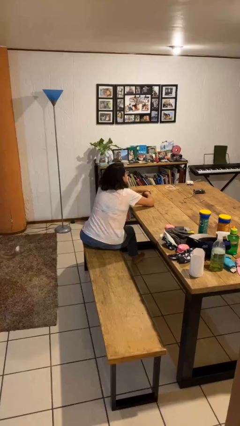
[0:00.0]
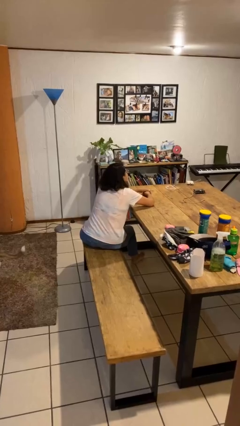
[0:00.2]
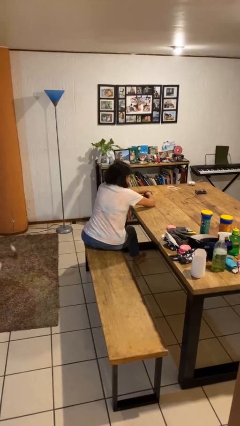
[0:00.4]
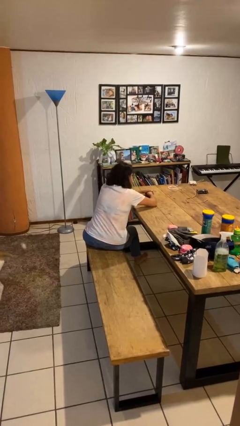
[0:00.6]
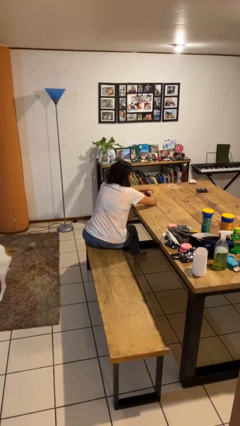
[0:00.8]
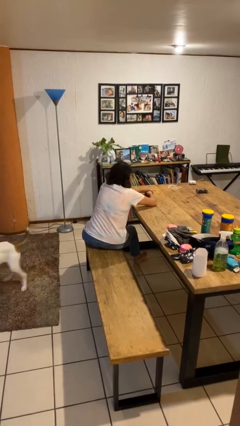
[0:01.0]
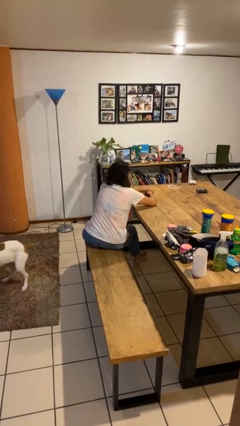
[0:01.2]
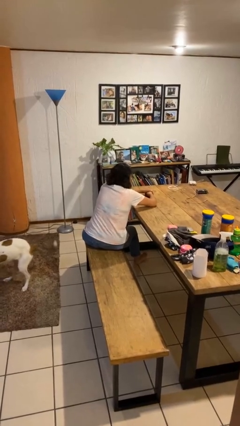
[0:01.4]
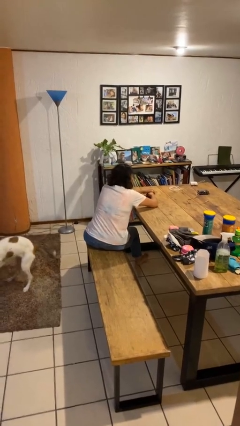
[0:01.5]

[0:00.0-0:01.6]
person nods head

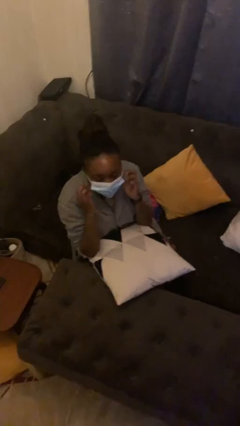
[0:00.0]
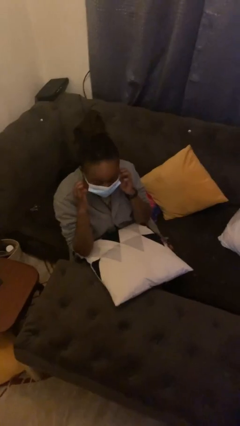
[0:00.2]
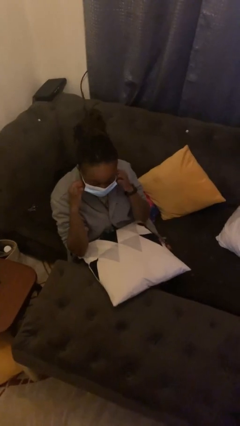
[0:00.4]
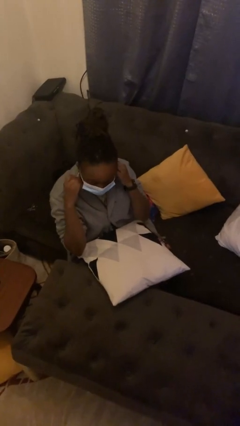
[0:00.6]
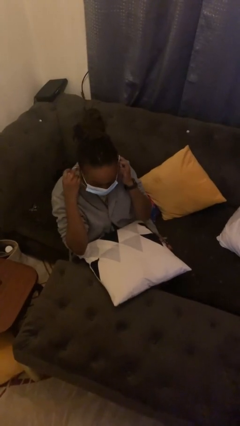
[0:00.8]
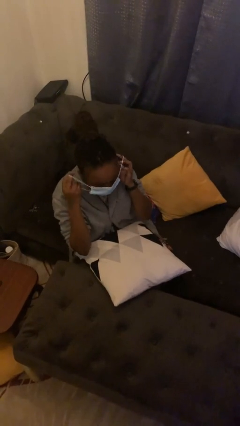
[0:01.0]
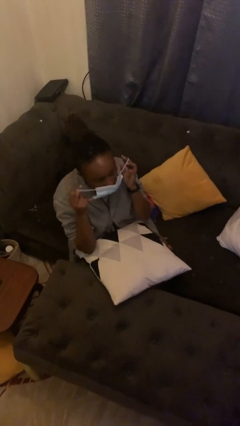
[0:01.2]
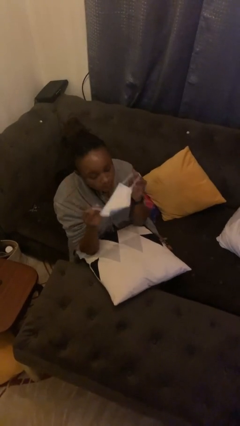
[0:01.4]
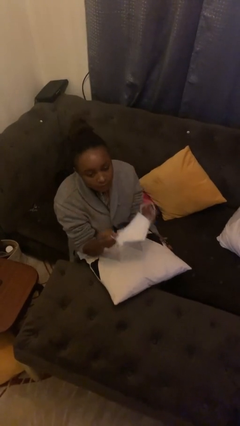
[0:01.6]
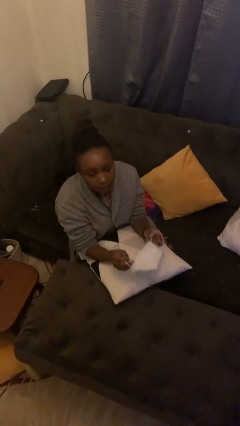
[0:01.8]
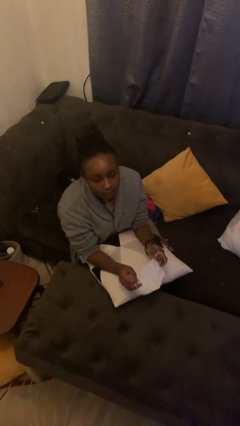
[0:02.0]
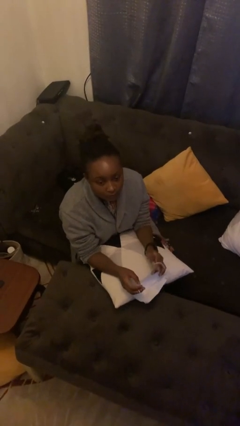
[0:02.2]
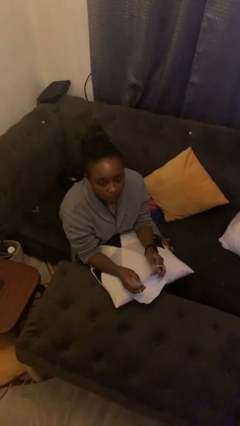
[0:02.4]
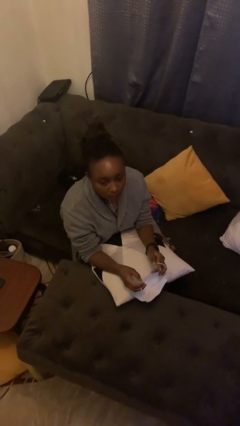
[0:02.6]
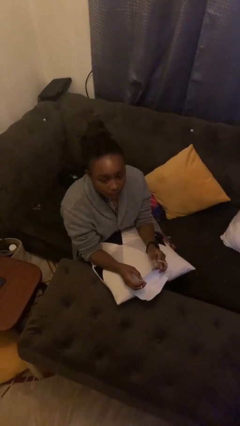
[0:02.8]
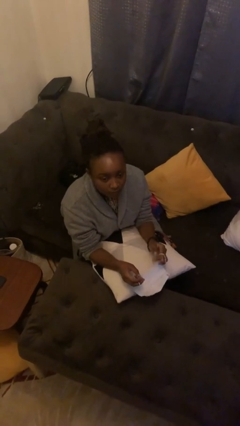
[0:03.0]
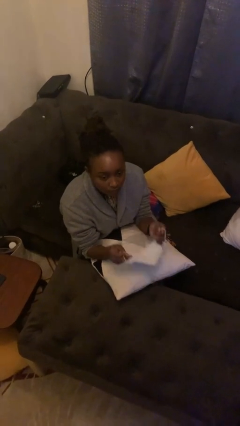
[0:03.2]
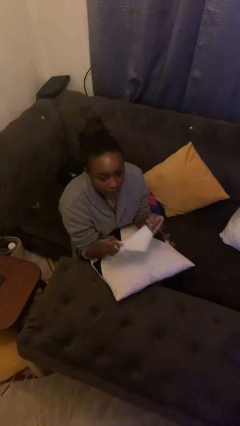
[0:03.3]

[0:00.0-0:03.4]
person takes off facemask

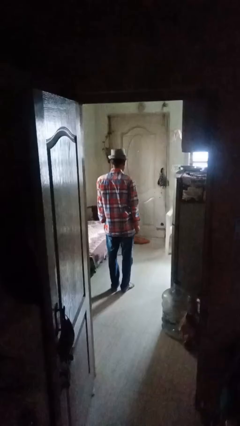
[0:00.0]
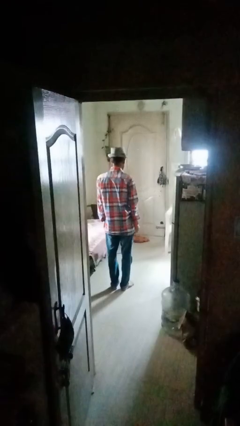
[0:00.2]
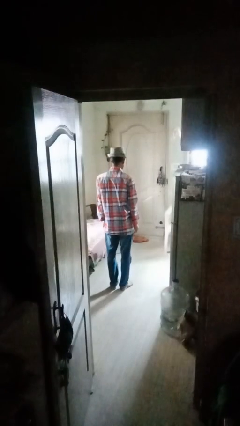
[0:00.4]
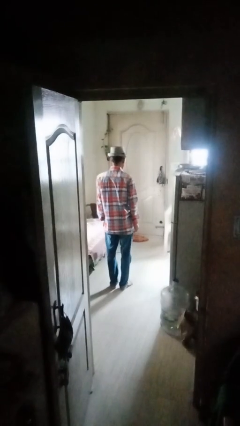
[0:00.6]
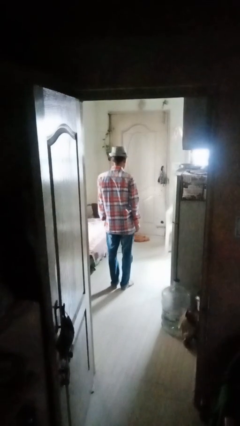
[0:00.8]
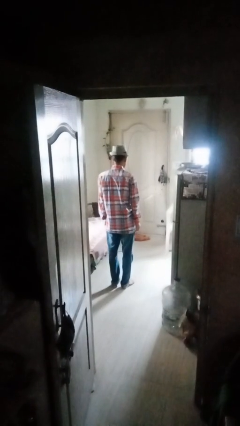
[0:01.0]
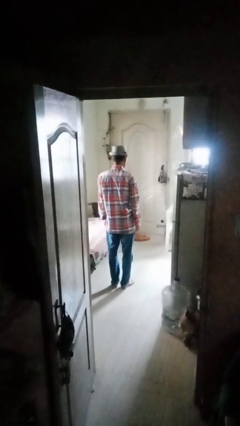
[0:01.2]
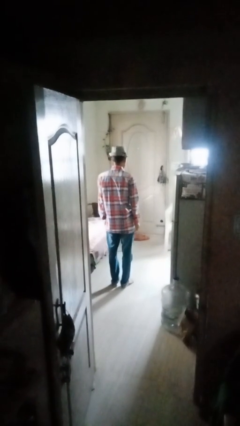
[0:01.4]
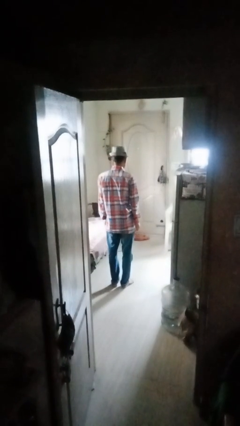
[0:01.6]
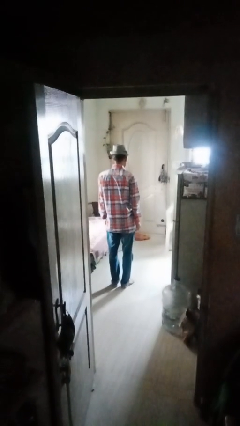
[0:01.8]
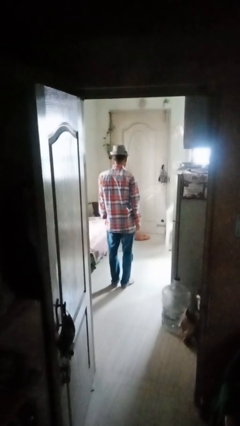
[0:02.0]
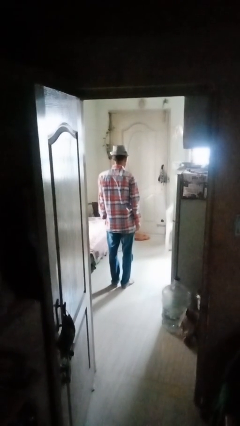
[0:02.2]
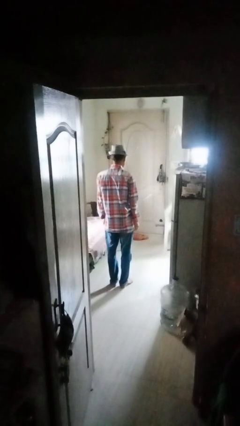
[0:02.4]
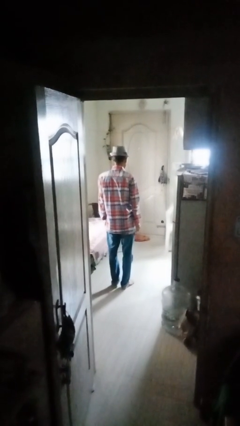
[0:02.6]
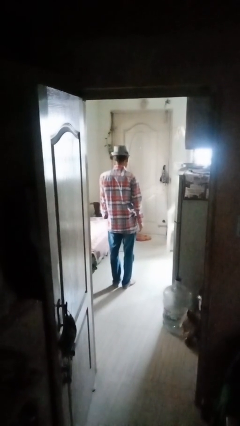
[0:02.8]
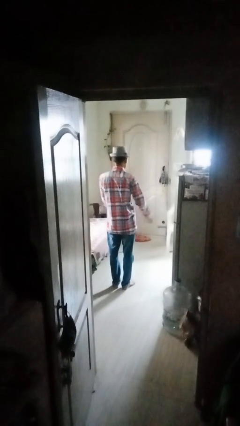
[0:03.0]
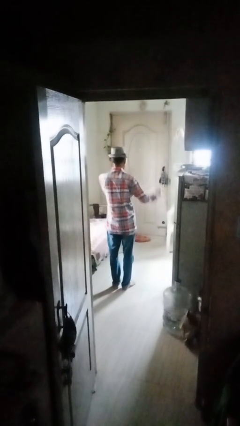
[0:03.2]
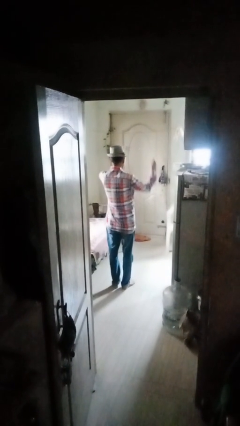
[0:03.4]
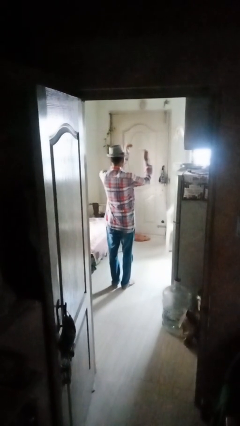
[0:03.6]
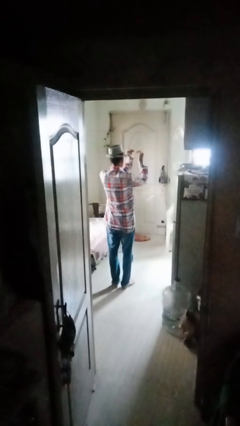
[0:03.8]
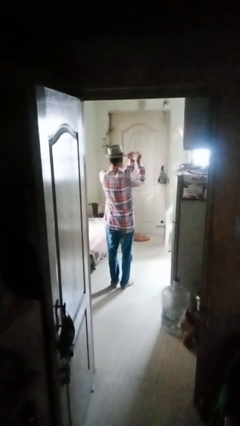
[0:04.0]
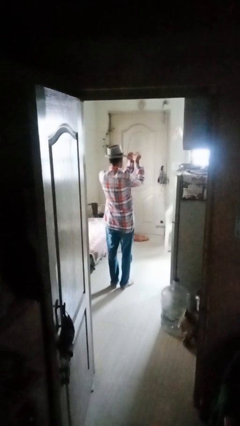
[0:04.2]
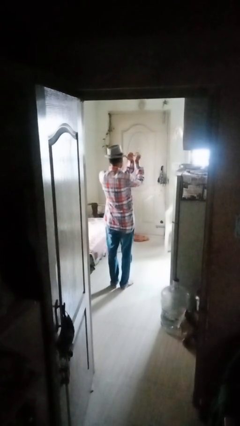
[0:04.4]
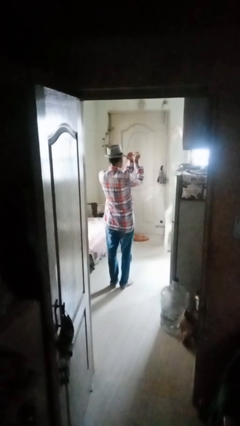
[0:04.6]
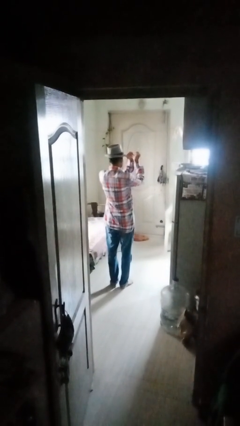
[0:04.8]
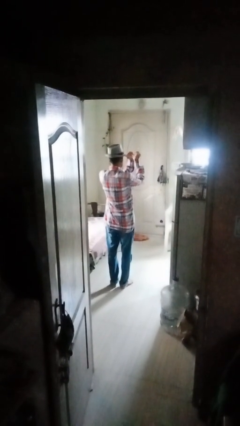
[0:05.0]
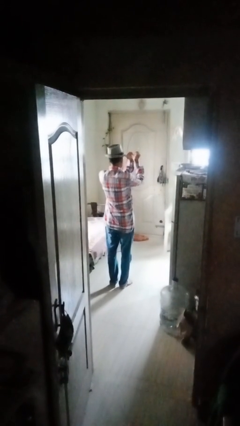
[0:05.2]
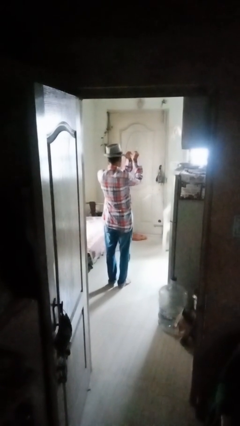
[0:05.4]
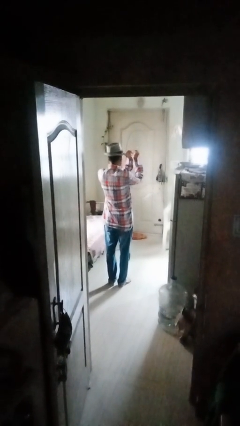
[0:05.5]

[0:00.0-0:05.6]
person gestures heart

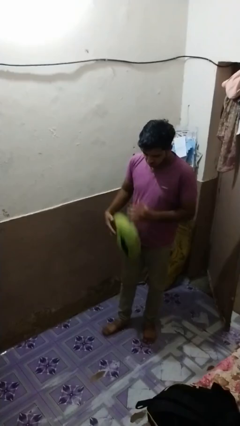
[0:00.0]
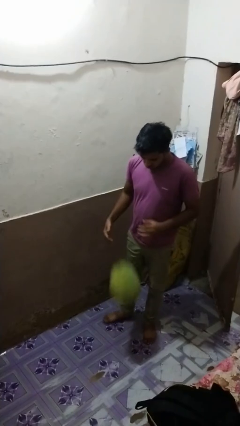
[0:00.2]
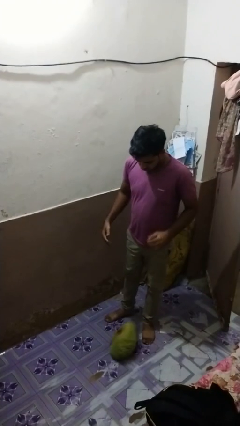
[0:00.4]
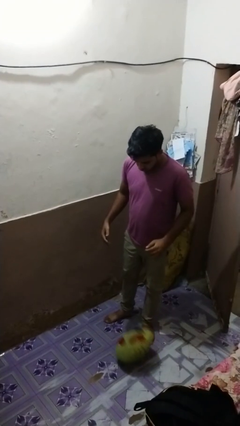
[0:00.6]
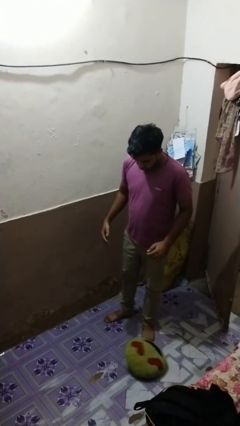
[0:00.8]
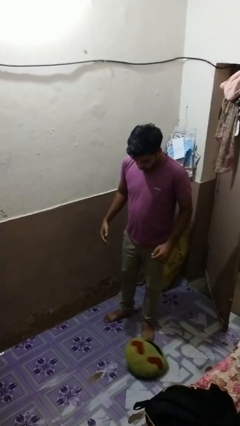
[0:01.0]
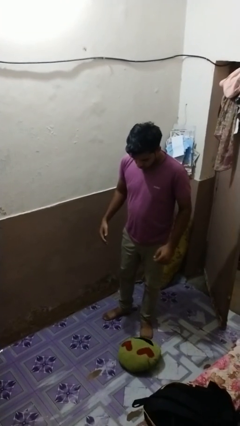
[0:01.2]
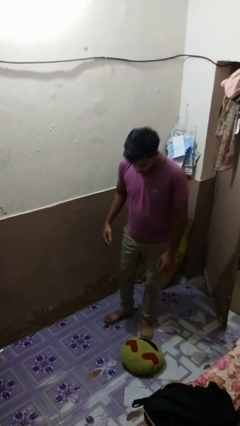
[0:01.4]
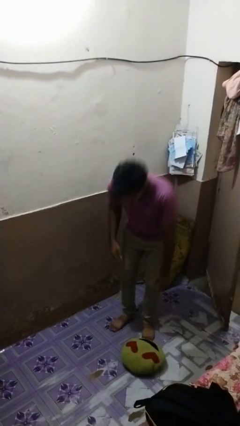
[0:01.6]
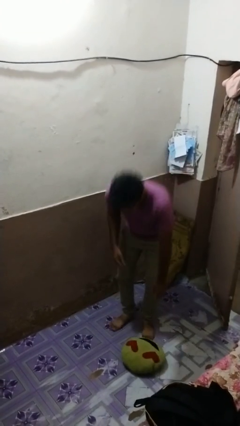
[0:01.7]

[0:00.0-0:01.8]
person drops object

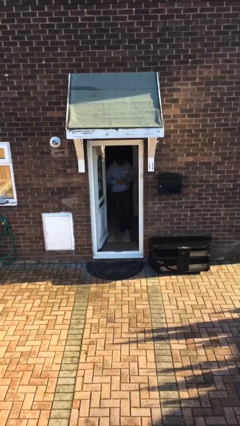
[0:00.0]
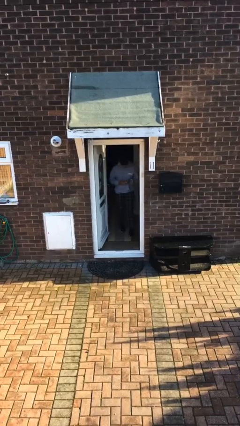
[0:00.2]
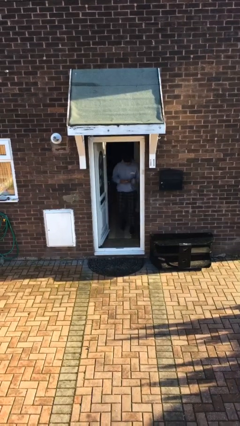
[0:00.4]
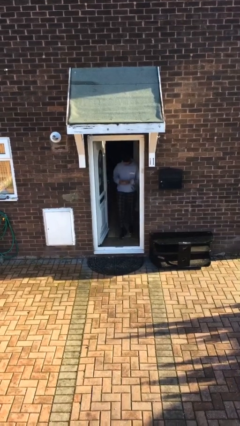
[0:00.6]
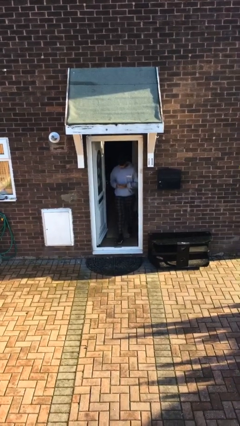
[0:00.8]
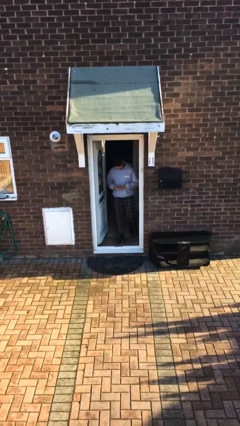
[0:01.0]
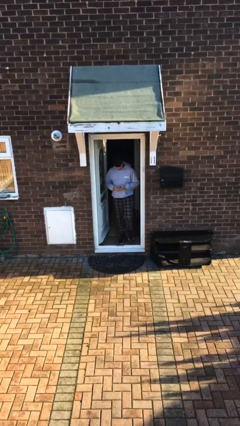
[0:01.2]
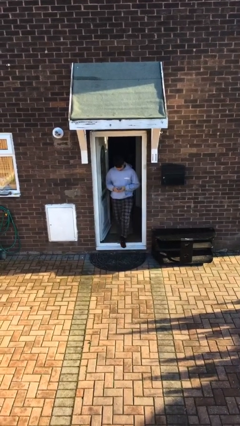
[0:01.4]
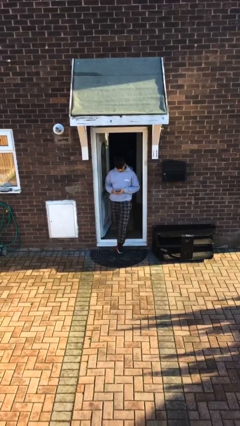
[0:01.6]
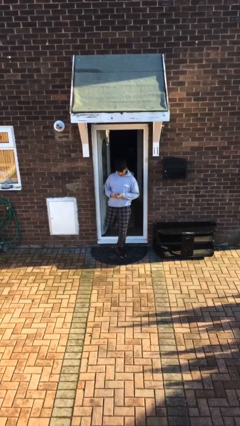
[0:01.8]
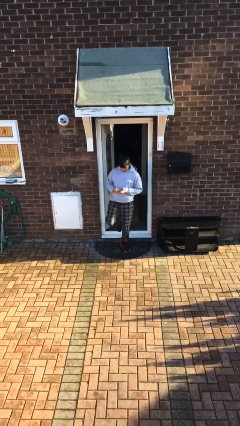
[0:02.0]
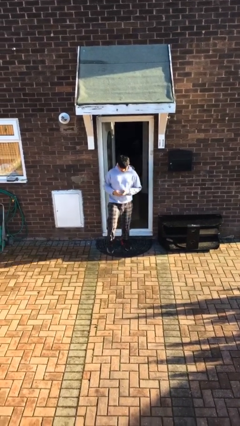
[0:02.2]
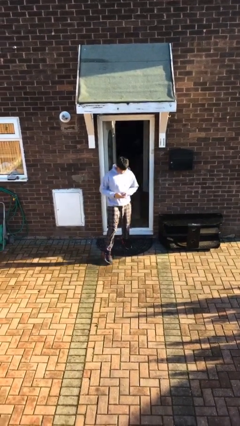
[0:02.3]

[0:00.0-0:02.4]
person enters scene through structure

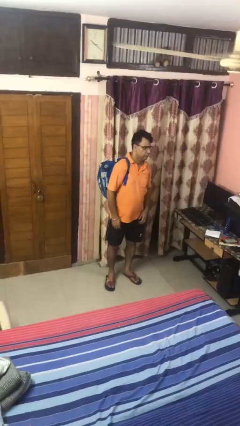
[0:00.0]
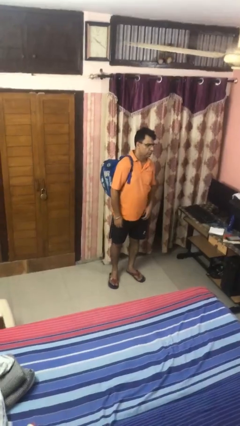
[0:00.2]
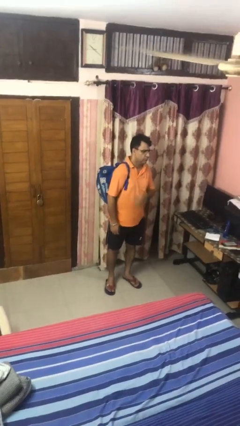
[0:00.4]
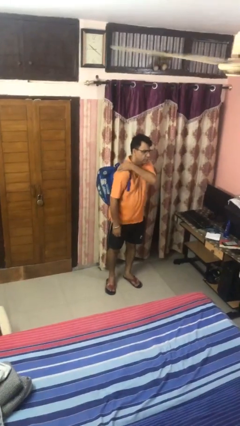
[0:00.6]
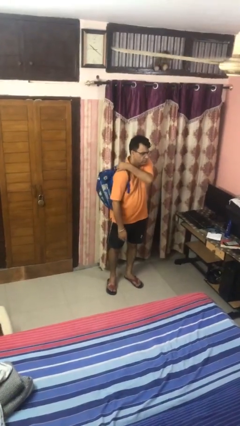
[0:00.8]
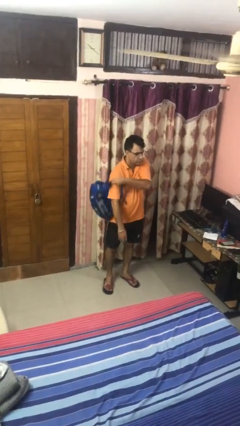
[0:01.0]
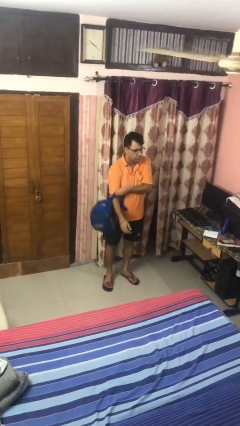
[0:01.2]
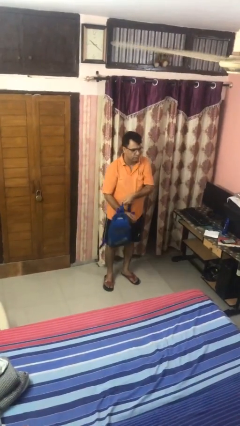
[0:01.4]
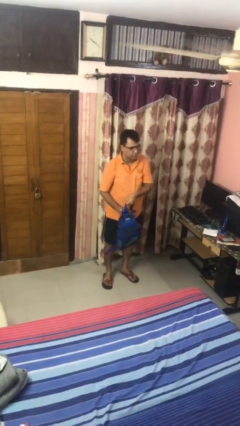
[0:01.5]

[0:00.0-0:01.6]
person takes off backpack

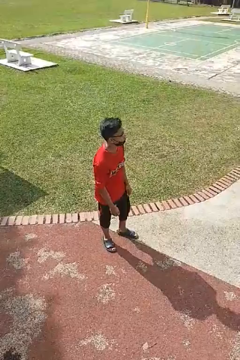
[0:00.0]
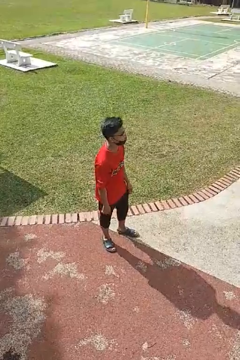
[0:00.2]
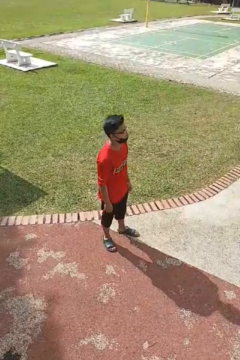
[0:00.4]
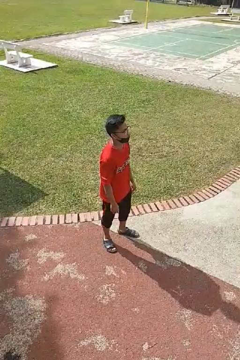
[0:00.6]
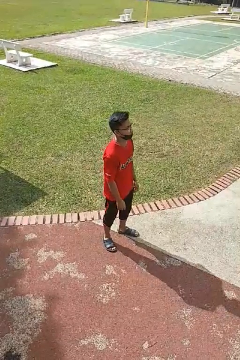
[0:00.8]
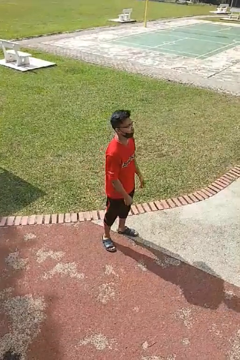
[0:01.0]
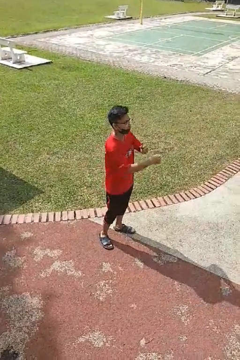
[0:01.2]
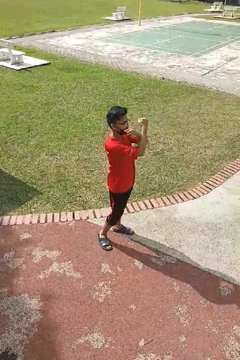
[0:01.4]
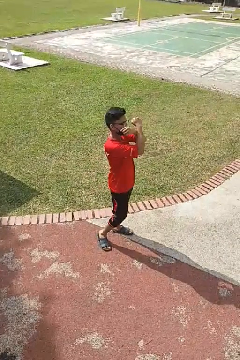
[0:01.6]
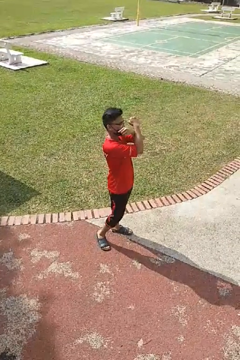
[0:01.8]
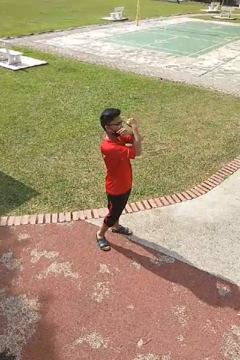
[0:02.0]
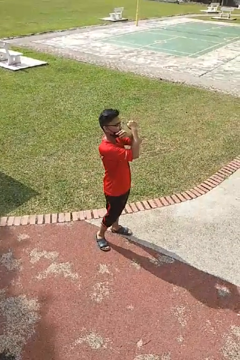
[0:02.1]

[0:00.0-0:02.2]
person gestures arms x
